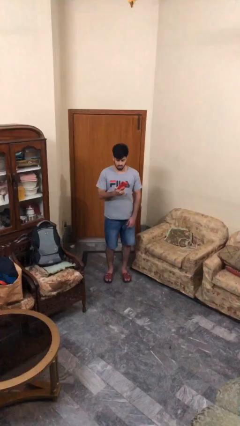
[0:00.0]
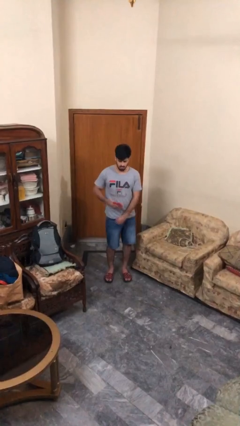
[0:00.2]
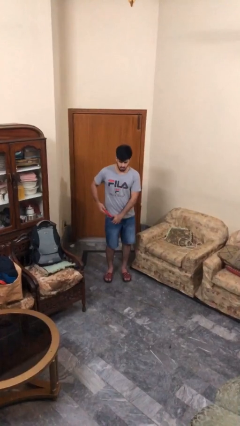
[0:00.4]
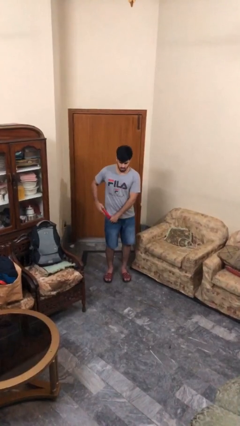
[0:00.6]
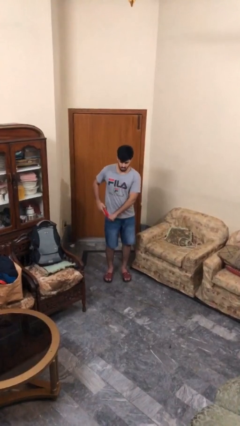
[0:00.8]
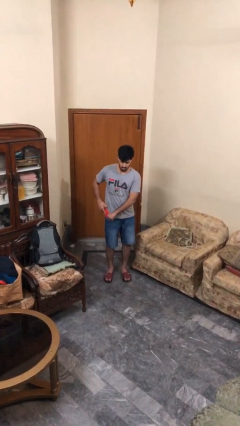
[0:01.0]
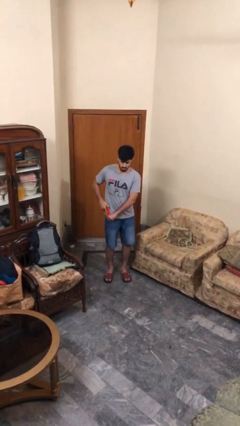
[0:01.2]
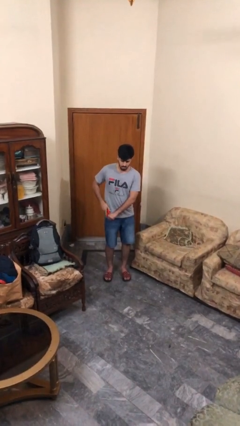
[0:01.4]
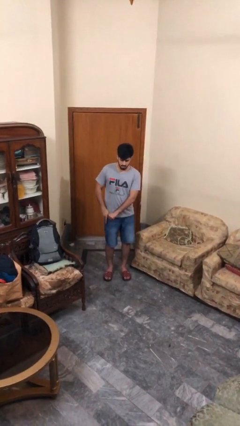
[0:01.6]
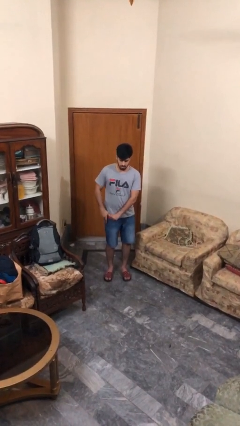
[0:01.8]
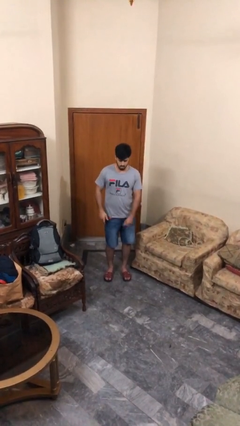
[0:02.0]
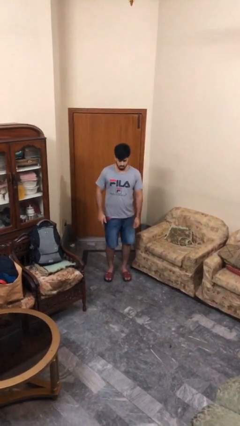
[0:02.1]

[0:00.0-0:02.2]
person puts phone into pocket

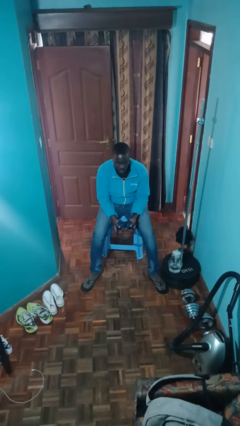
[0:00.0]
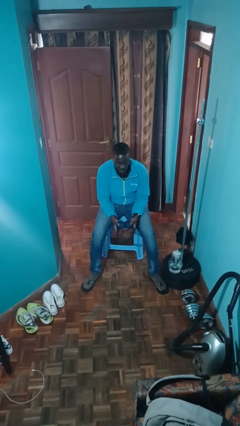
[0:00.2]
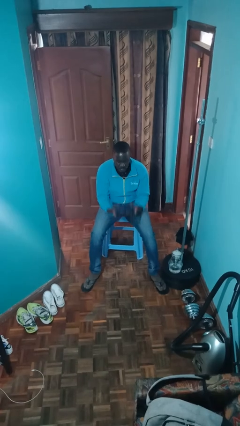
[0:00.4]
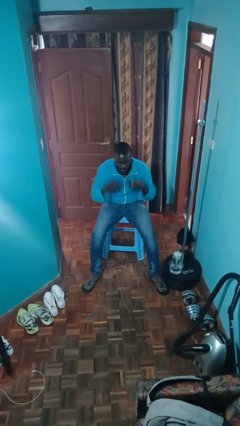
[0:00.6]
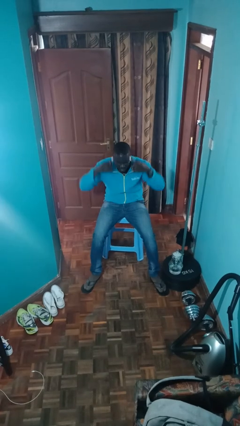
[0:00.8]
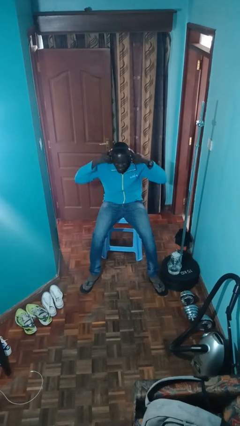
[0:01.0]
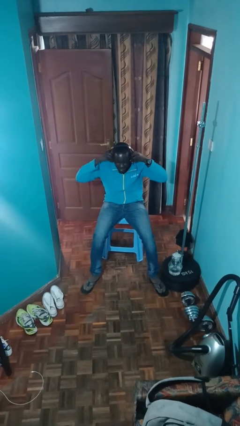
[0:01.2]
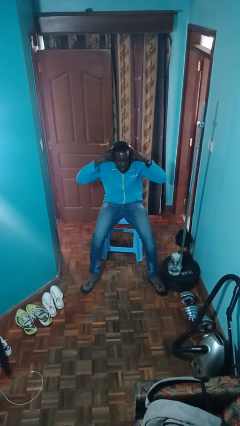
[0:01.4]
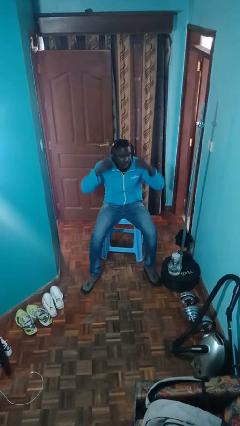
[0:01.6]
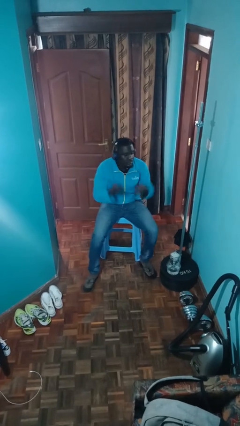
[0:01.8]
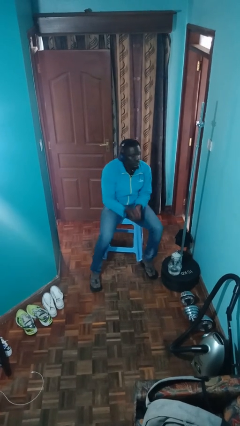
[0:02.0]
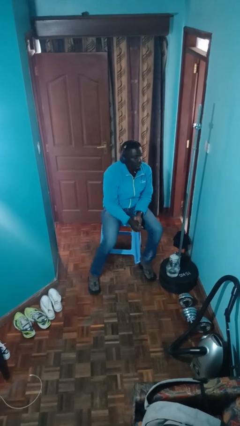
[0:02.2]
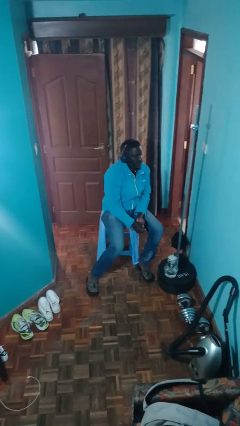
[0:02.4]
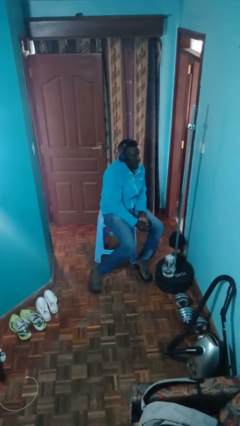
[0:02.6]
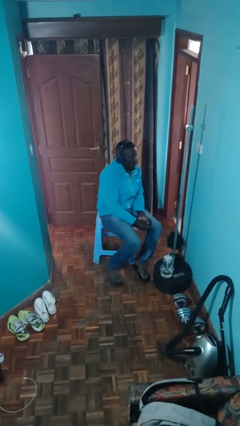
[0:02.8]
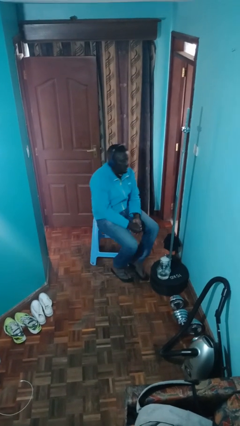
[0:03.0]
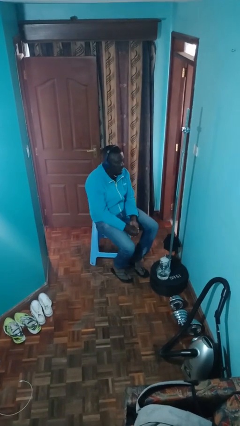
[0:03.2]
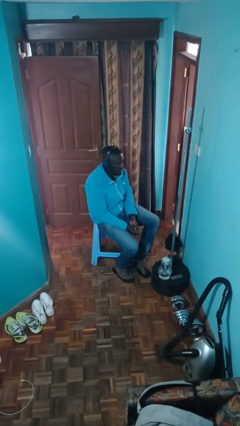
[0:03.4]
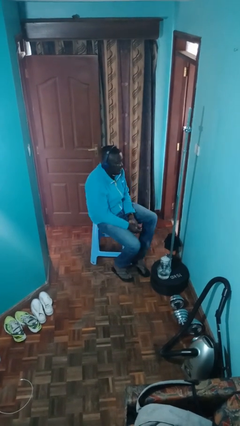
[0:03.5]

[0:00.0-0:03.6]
person puts on headphones

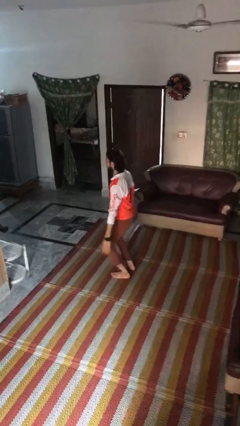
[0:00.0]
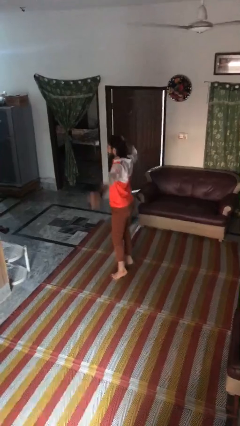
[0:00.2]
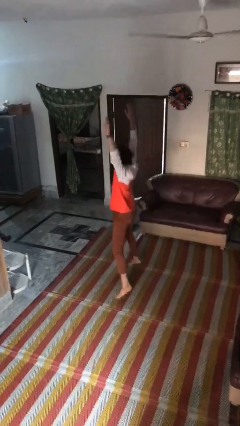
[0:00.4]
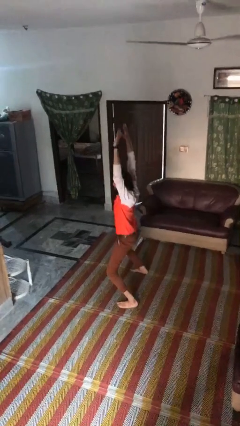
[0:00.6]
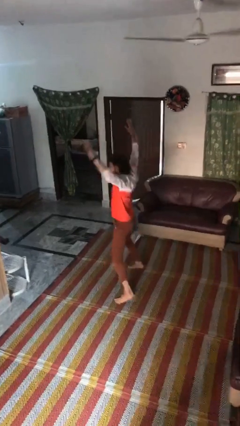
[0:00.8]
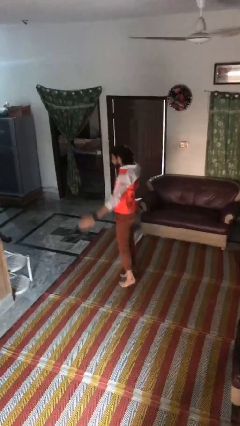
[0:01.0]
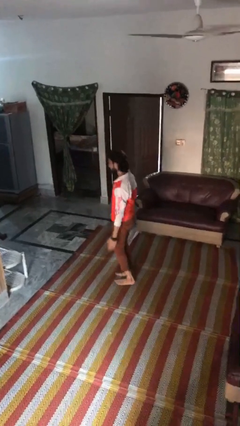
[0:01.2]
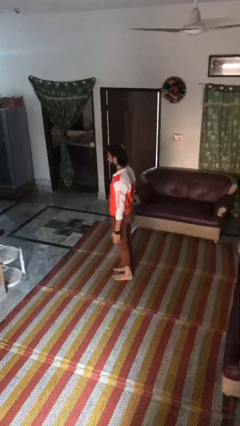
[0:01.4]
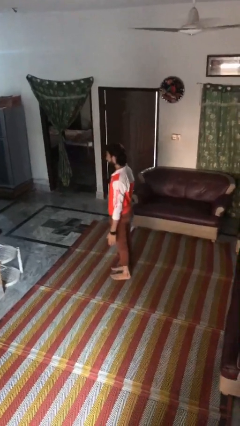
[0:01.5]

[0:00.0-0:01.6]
person exercises with jumping jacks

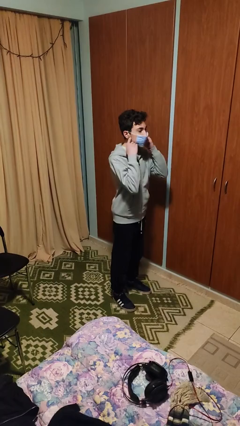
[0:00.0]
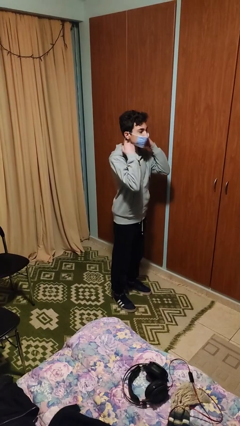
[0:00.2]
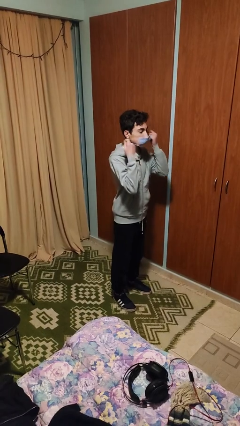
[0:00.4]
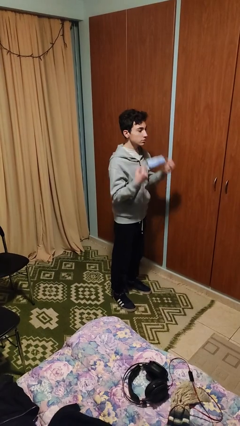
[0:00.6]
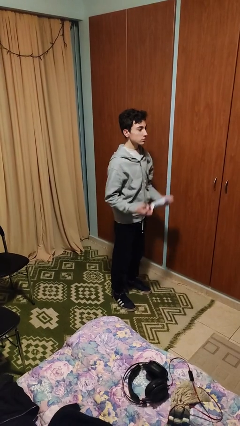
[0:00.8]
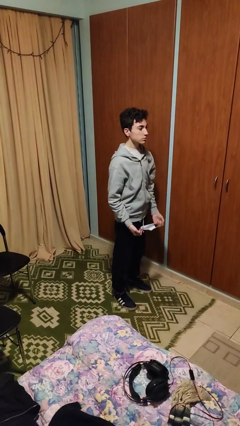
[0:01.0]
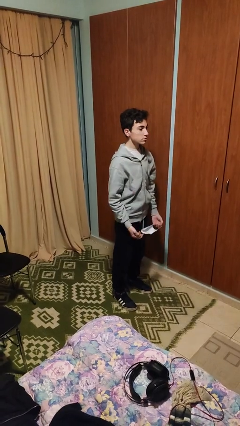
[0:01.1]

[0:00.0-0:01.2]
person takes off facemask

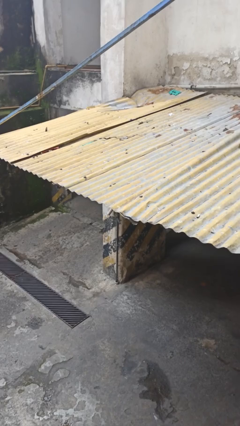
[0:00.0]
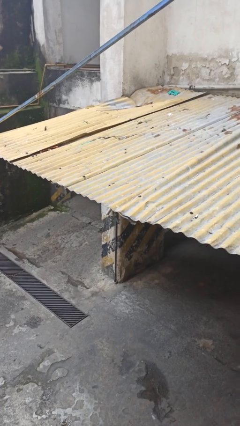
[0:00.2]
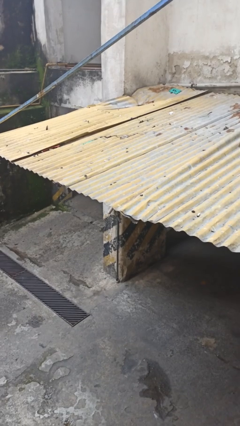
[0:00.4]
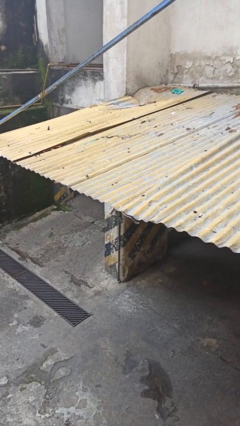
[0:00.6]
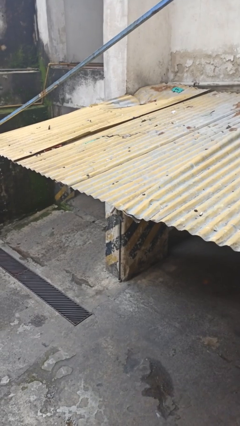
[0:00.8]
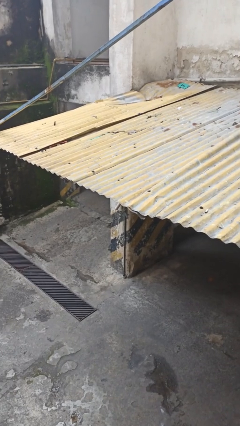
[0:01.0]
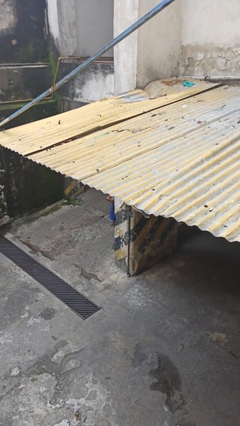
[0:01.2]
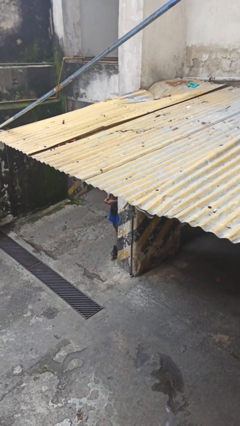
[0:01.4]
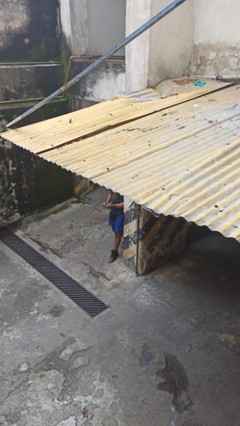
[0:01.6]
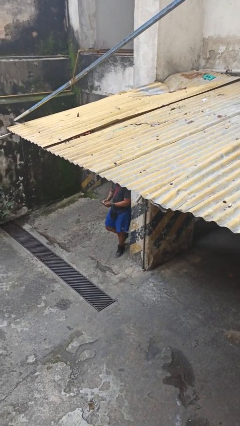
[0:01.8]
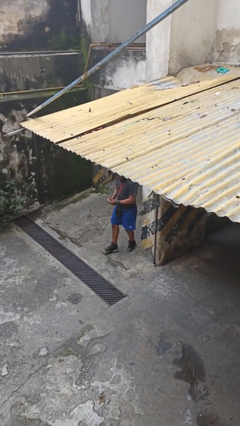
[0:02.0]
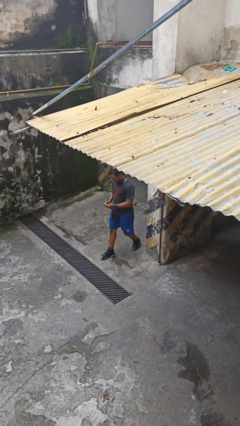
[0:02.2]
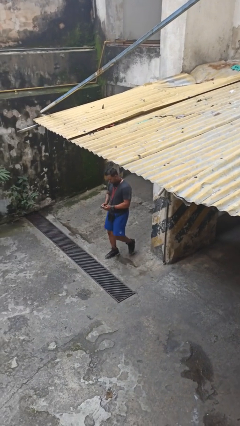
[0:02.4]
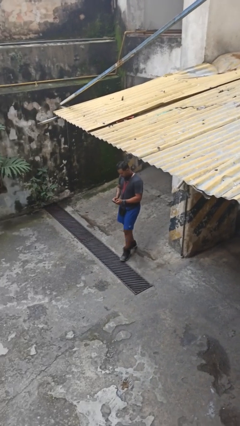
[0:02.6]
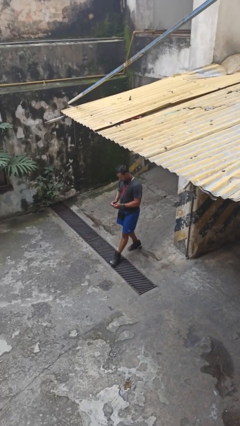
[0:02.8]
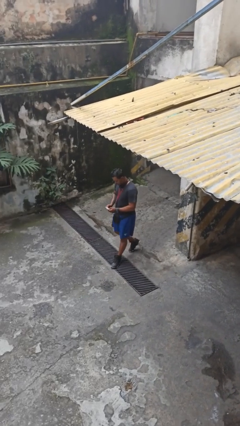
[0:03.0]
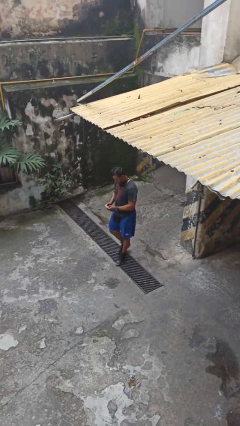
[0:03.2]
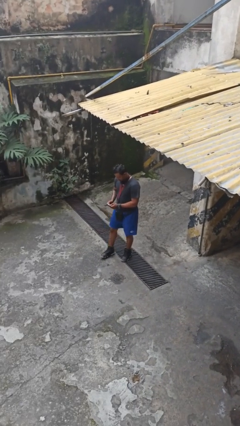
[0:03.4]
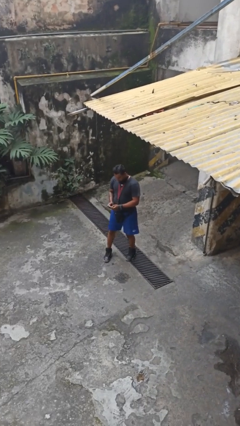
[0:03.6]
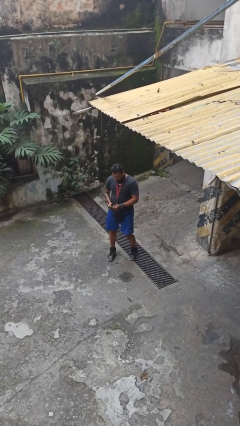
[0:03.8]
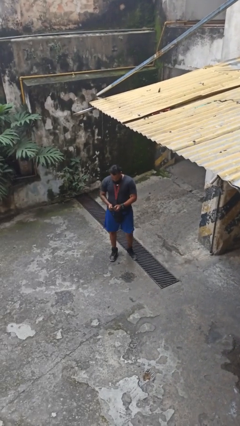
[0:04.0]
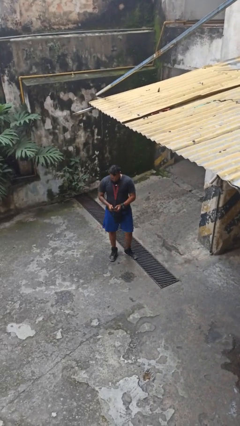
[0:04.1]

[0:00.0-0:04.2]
person enters scene through structure

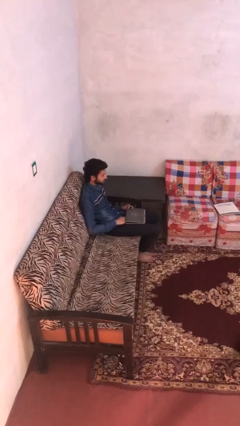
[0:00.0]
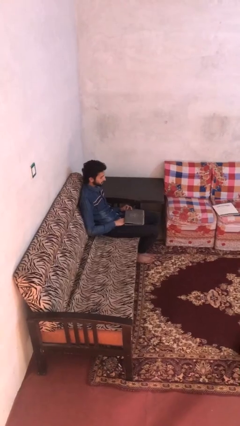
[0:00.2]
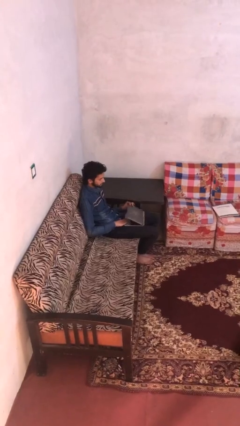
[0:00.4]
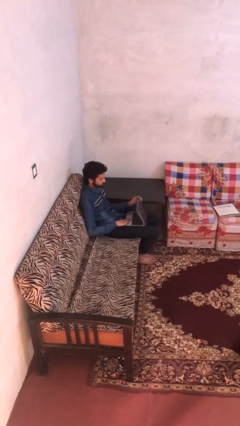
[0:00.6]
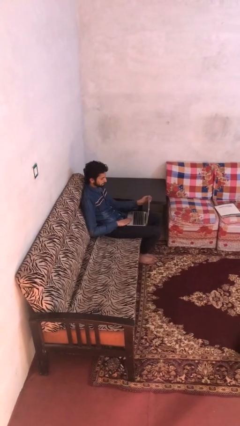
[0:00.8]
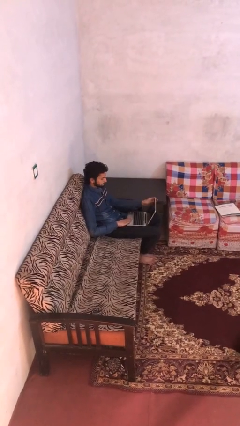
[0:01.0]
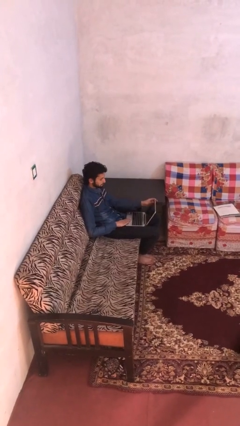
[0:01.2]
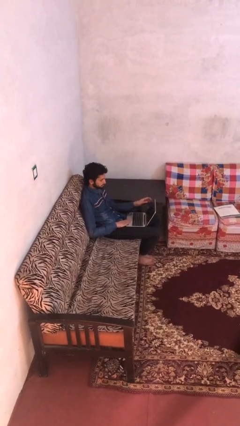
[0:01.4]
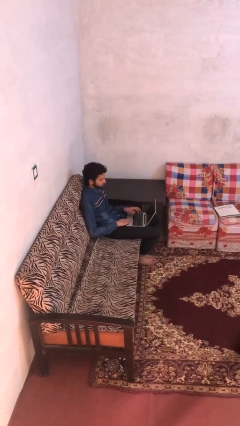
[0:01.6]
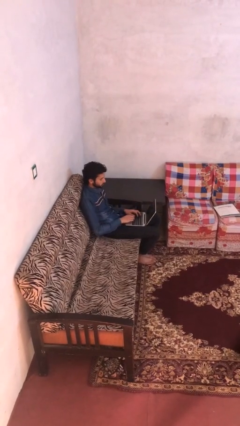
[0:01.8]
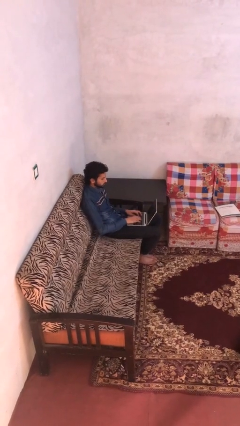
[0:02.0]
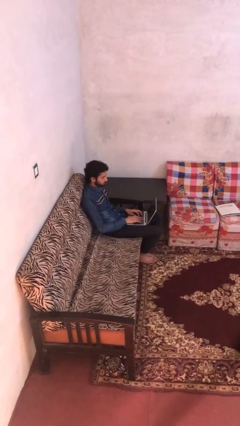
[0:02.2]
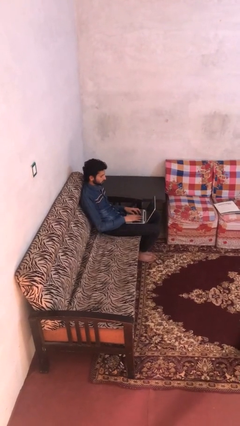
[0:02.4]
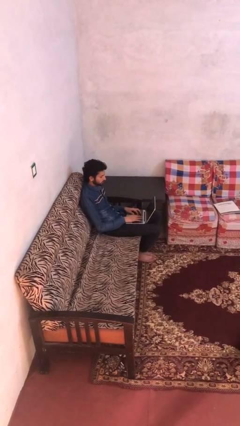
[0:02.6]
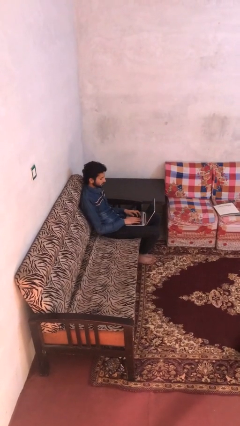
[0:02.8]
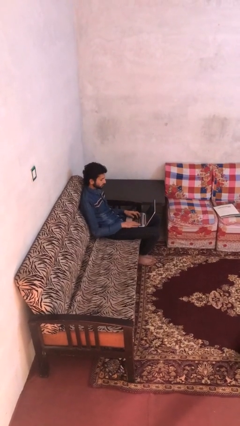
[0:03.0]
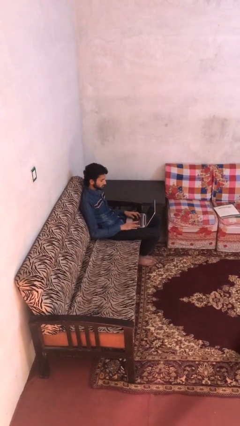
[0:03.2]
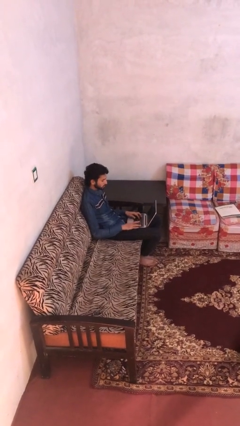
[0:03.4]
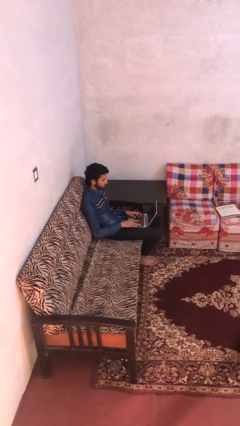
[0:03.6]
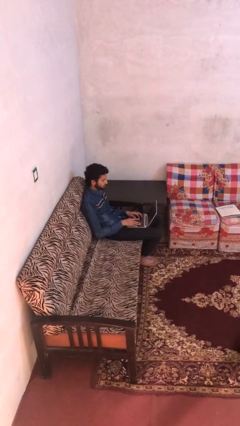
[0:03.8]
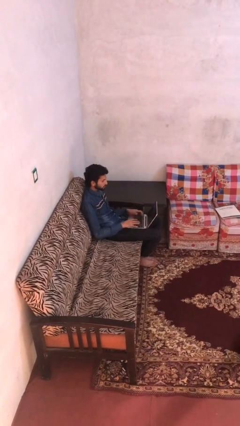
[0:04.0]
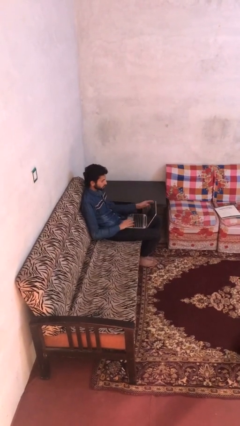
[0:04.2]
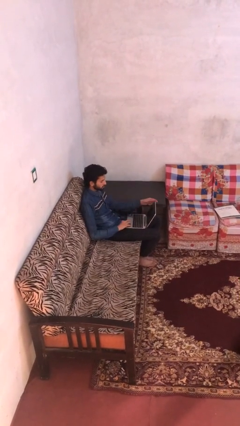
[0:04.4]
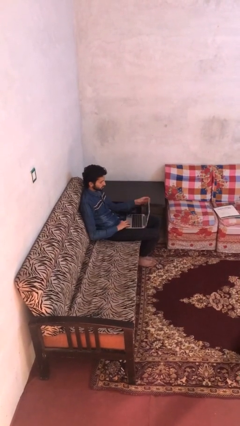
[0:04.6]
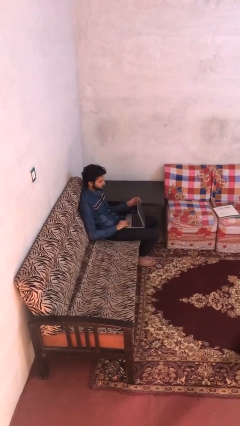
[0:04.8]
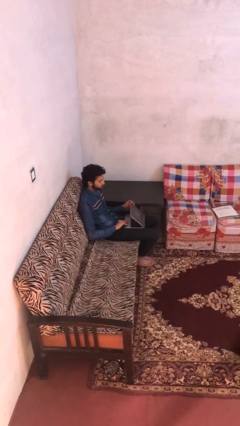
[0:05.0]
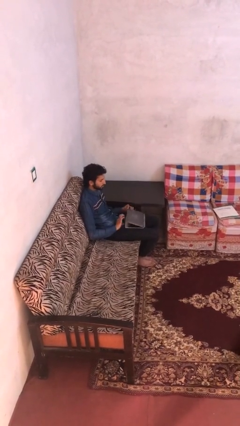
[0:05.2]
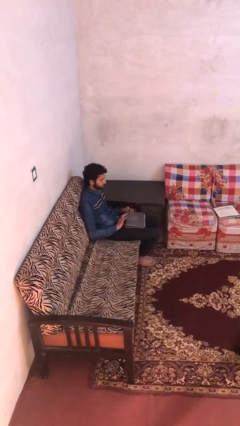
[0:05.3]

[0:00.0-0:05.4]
person interacts with laptop
